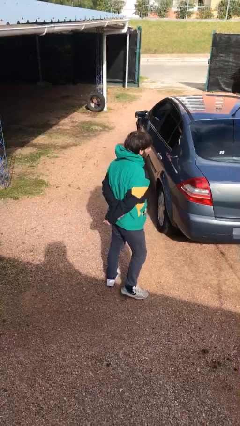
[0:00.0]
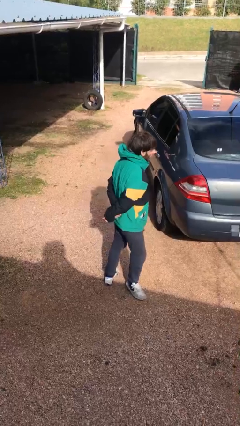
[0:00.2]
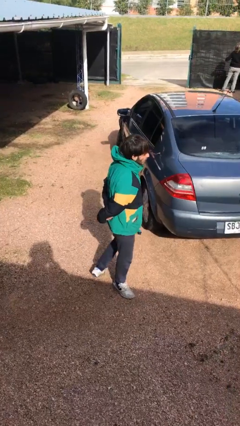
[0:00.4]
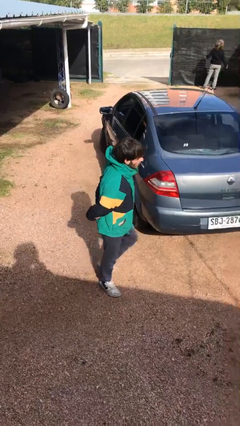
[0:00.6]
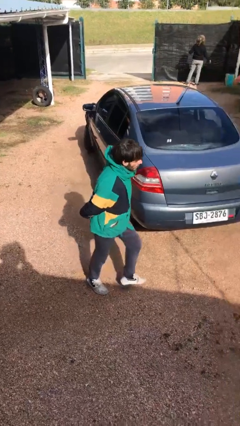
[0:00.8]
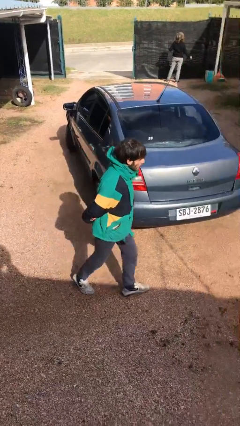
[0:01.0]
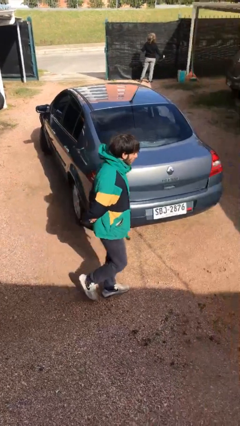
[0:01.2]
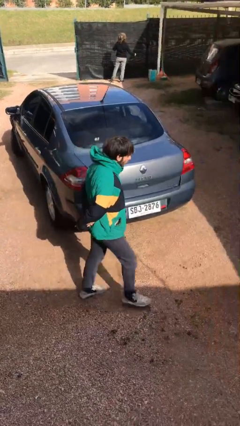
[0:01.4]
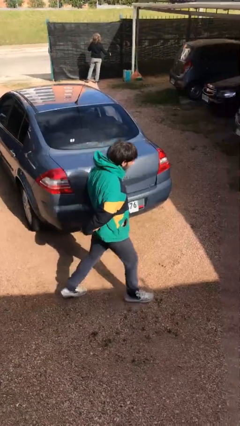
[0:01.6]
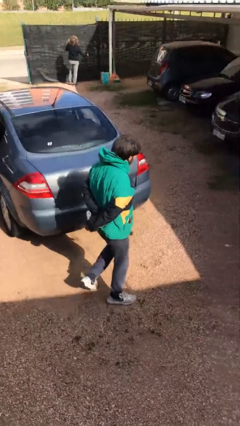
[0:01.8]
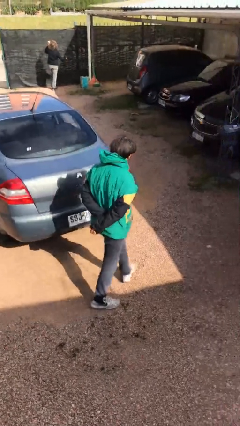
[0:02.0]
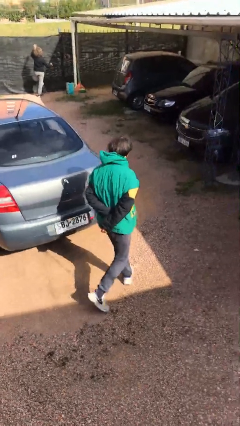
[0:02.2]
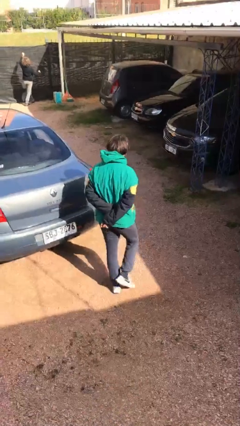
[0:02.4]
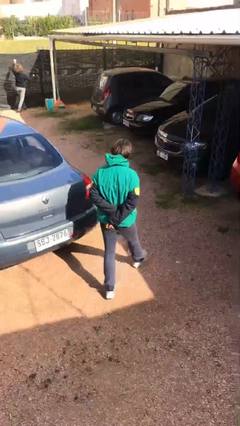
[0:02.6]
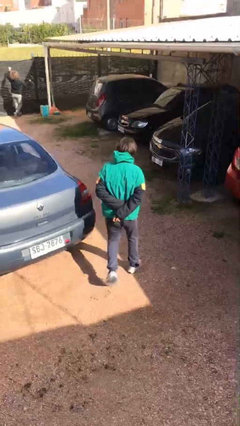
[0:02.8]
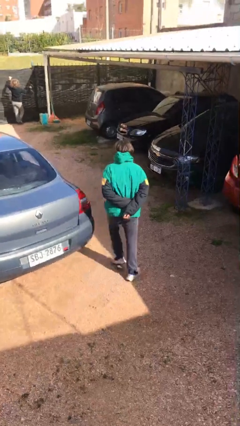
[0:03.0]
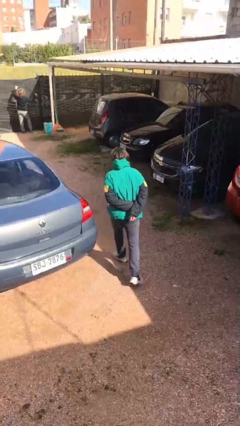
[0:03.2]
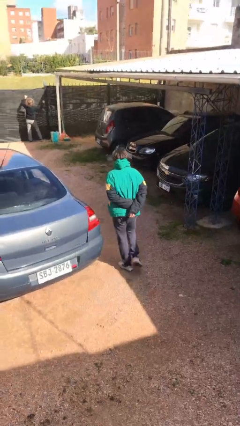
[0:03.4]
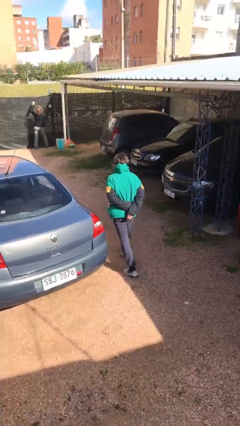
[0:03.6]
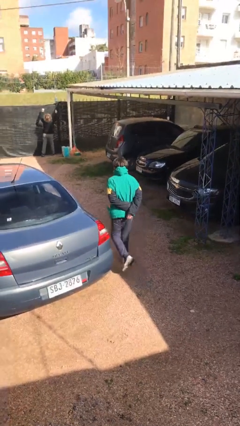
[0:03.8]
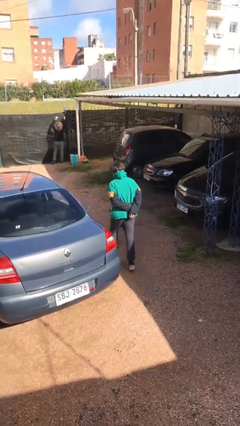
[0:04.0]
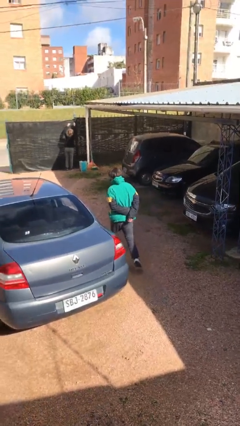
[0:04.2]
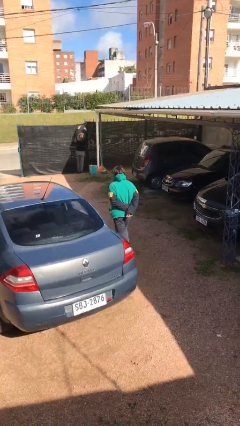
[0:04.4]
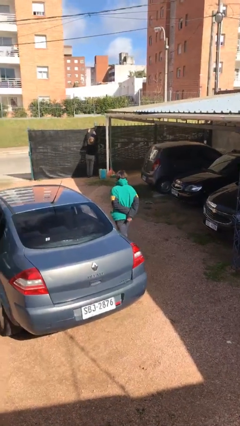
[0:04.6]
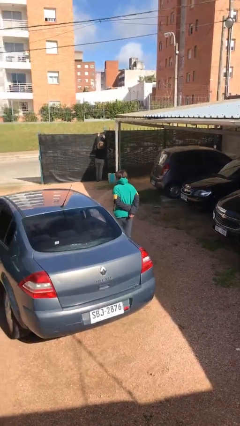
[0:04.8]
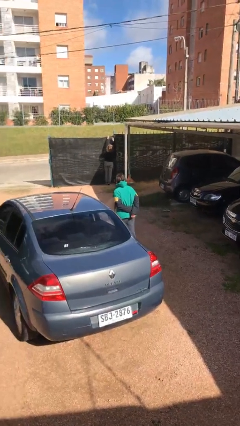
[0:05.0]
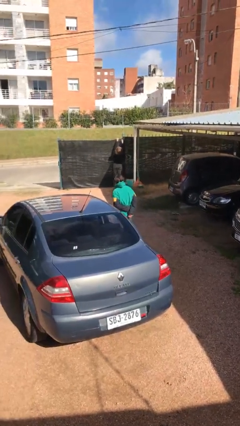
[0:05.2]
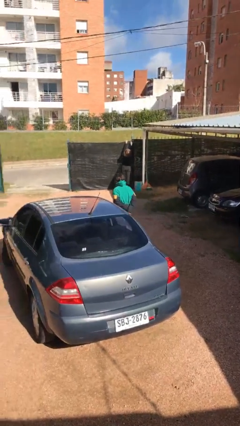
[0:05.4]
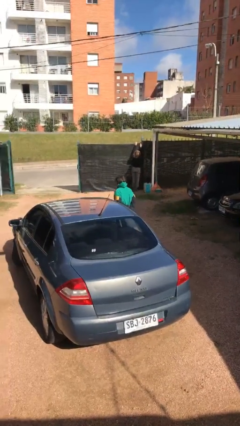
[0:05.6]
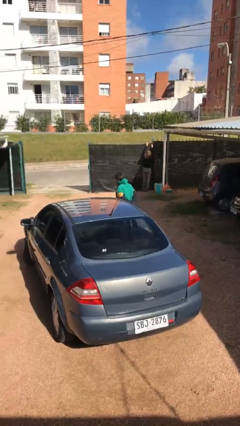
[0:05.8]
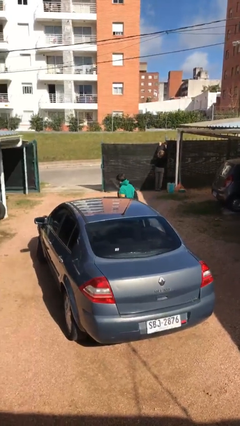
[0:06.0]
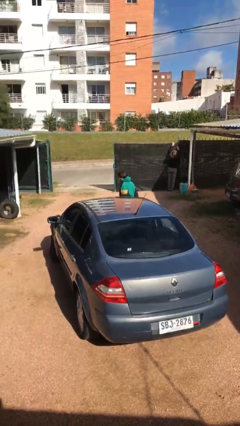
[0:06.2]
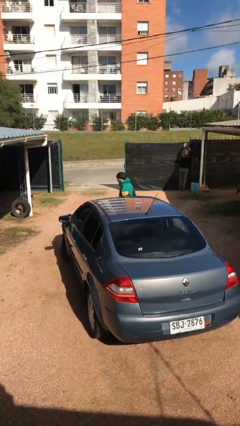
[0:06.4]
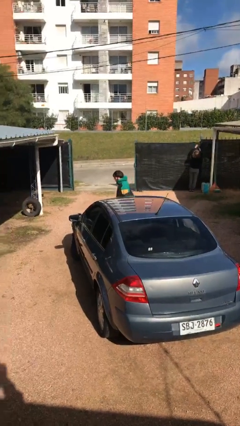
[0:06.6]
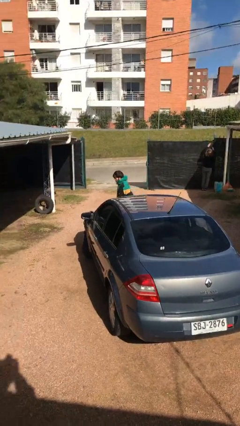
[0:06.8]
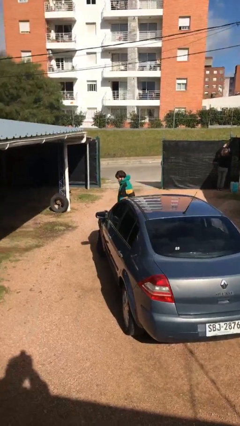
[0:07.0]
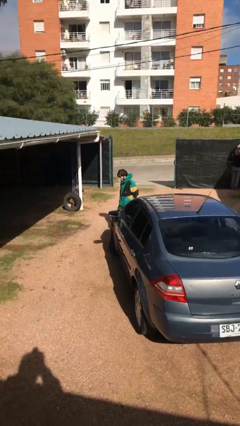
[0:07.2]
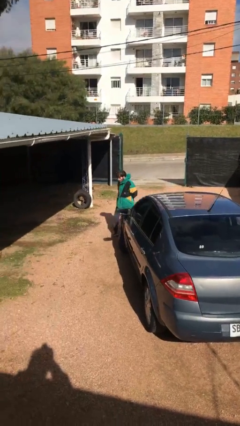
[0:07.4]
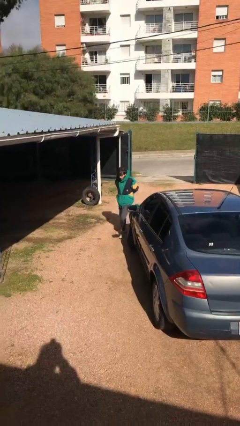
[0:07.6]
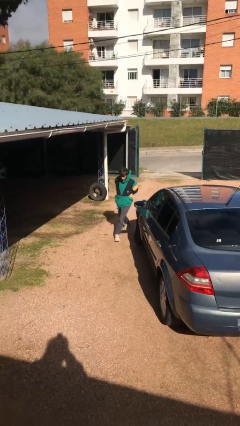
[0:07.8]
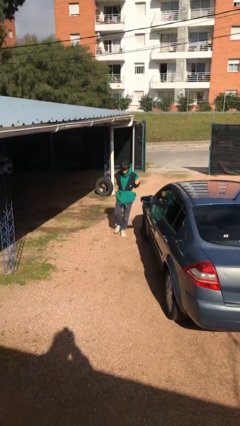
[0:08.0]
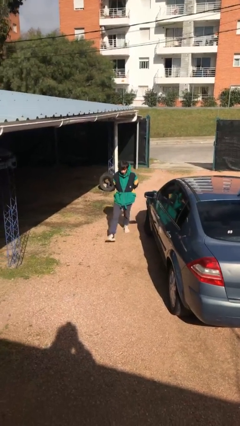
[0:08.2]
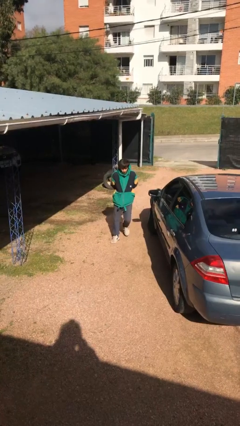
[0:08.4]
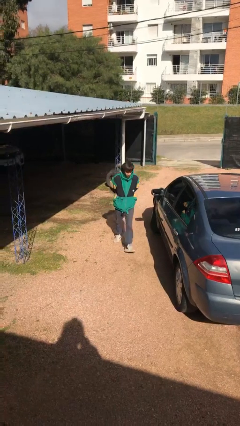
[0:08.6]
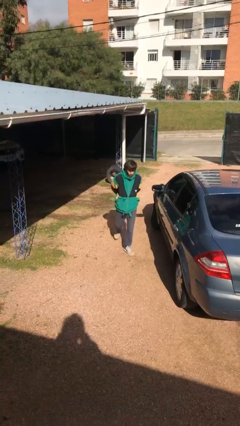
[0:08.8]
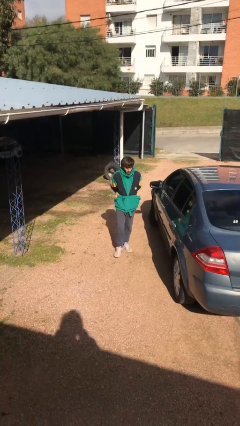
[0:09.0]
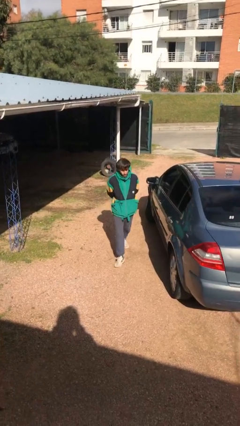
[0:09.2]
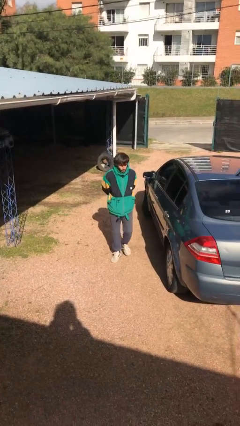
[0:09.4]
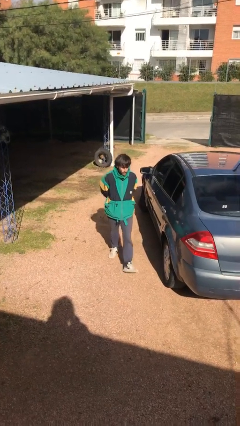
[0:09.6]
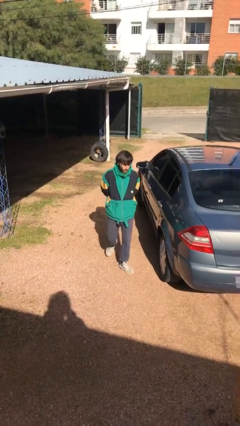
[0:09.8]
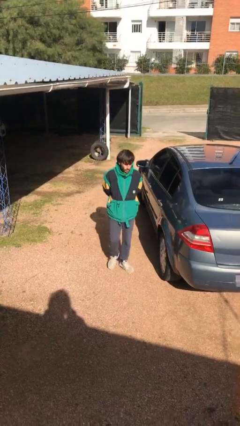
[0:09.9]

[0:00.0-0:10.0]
person walks around car

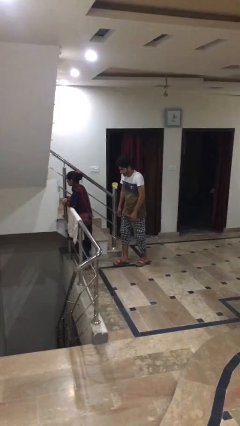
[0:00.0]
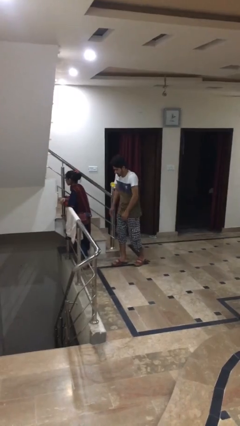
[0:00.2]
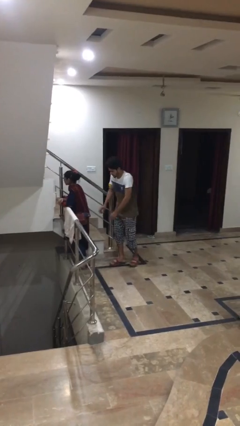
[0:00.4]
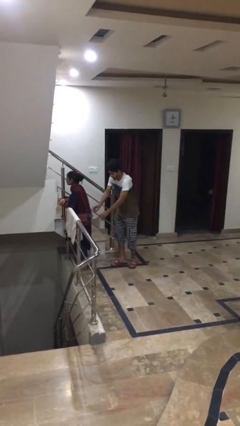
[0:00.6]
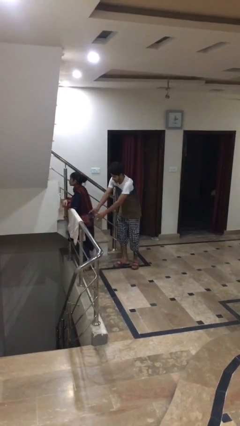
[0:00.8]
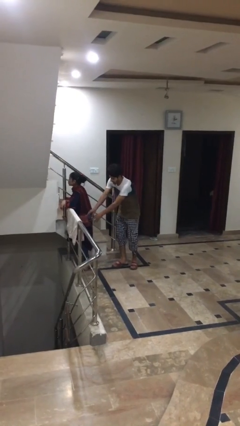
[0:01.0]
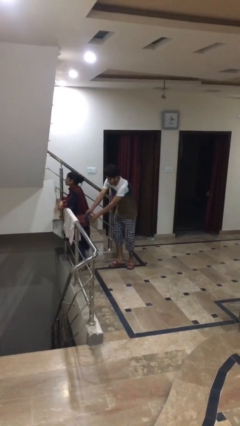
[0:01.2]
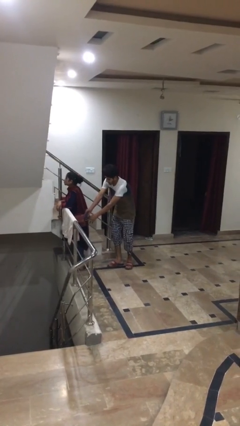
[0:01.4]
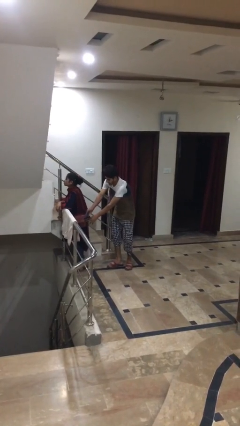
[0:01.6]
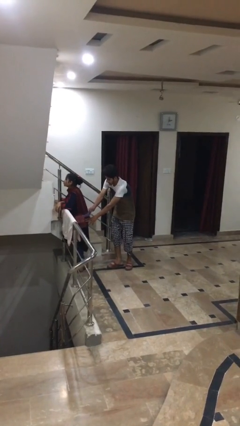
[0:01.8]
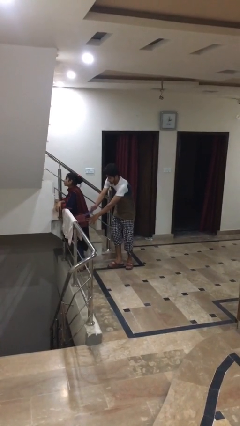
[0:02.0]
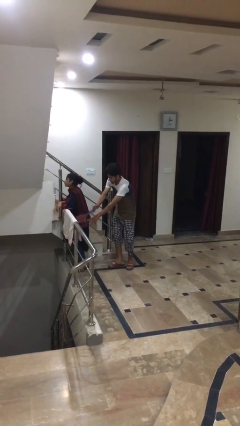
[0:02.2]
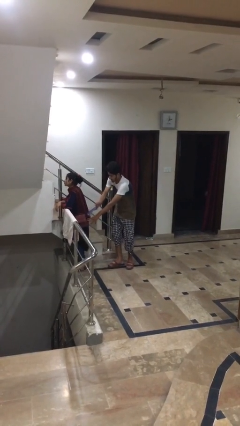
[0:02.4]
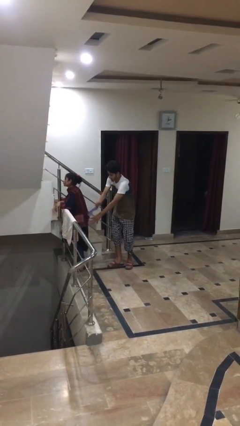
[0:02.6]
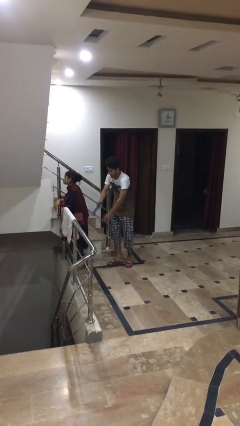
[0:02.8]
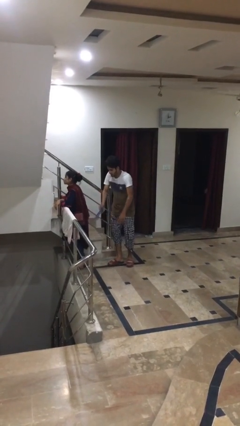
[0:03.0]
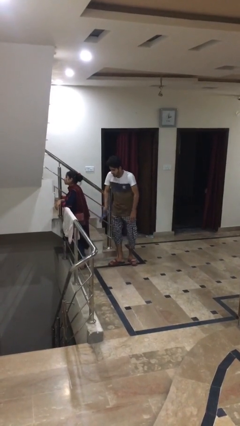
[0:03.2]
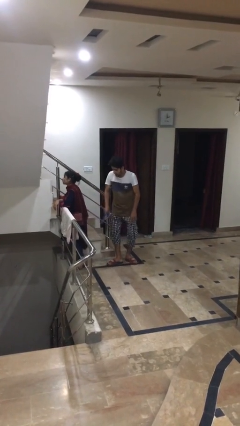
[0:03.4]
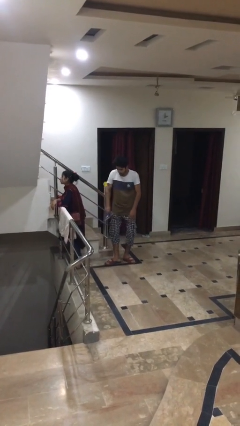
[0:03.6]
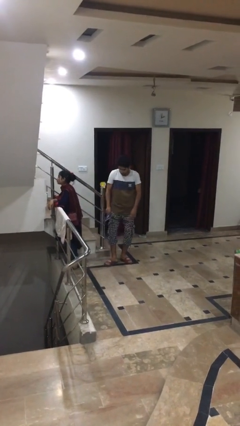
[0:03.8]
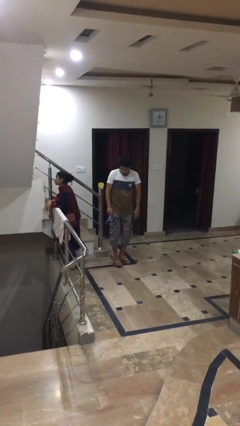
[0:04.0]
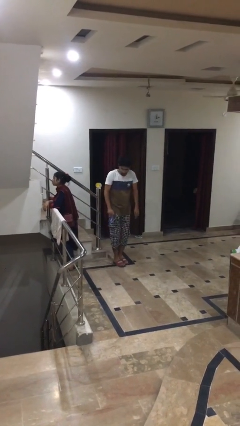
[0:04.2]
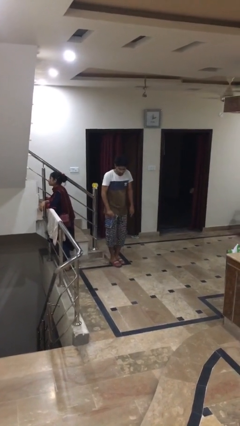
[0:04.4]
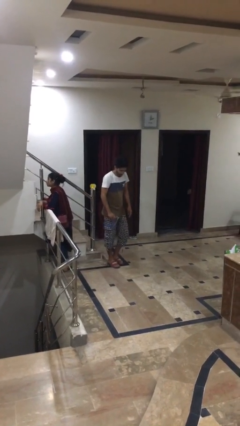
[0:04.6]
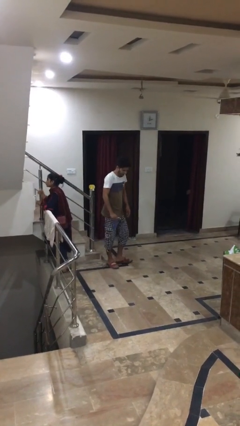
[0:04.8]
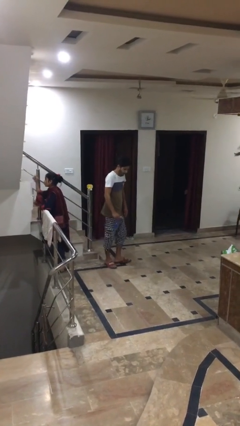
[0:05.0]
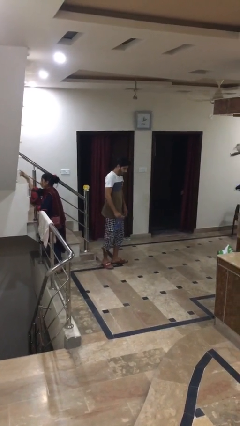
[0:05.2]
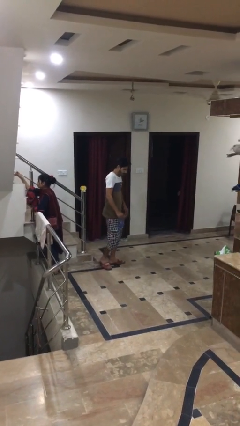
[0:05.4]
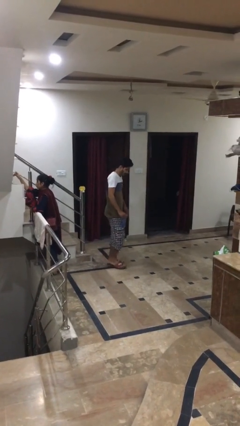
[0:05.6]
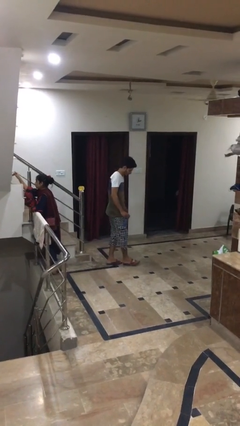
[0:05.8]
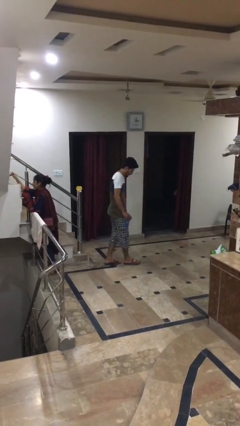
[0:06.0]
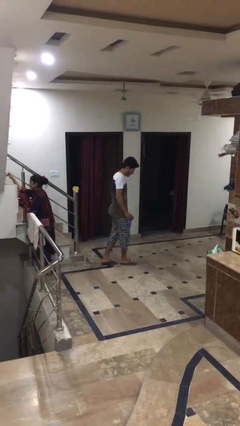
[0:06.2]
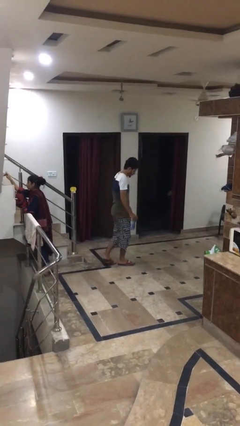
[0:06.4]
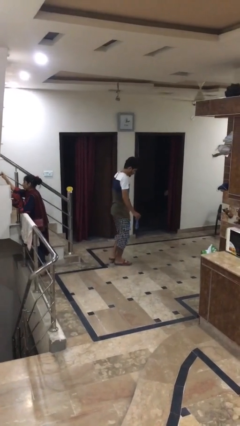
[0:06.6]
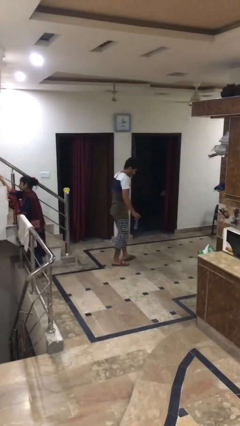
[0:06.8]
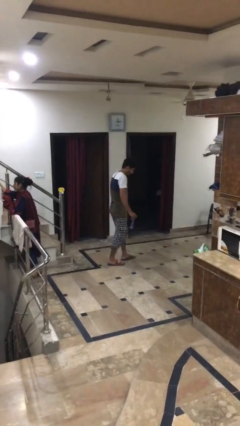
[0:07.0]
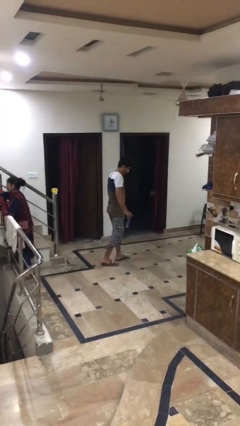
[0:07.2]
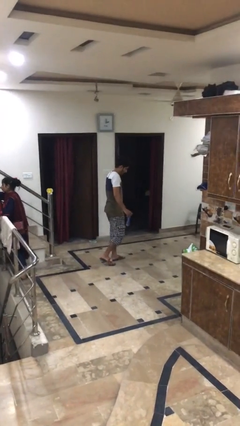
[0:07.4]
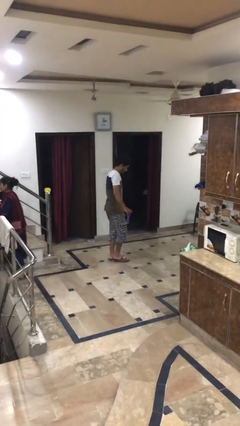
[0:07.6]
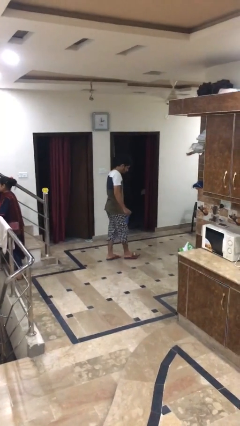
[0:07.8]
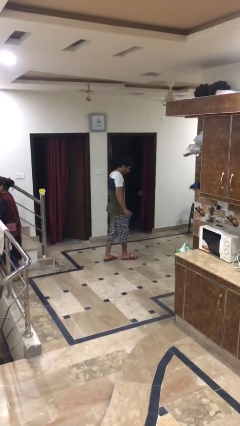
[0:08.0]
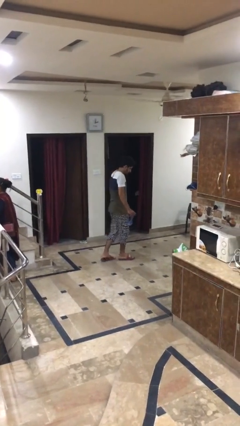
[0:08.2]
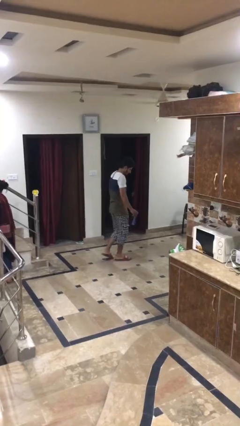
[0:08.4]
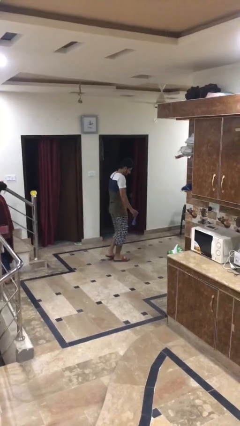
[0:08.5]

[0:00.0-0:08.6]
person steals object from person
